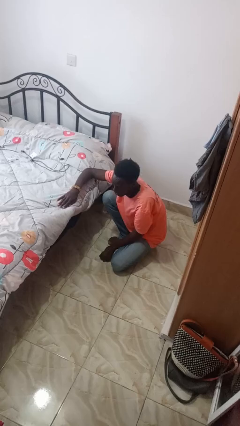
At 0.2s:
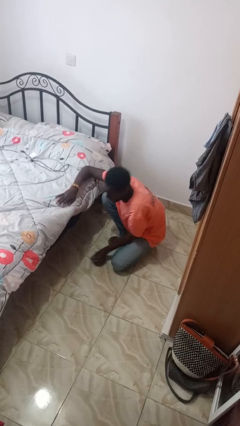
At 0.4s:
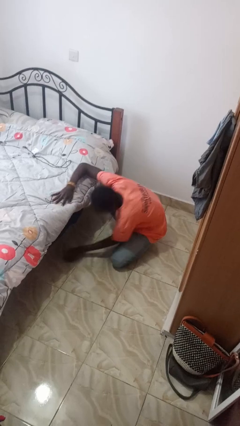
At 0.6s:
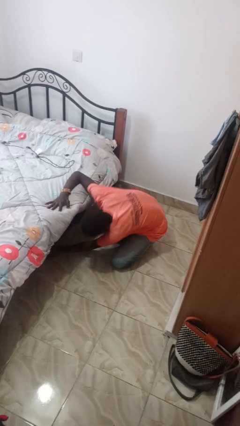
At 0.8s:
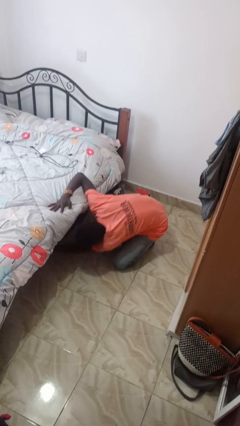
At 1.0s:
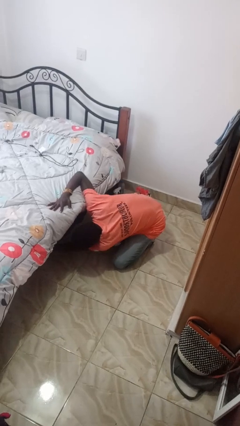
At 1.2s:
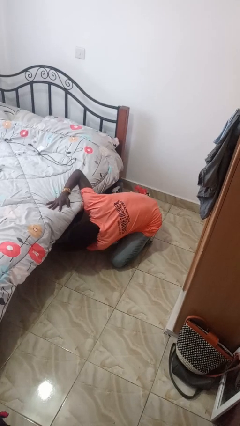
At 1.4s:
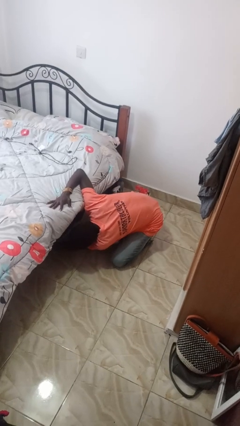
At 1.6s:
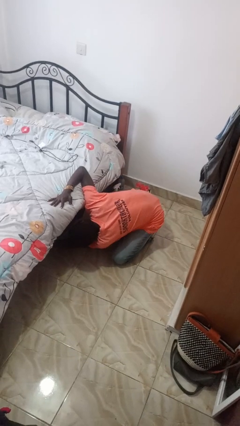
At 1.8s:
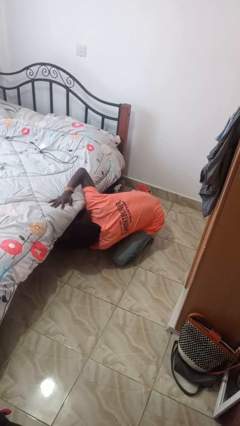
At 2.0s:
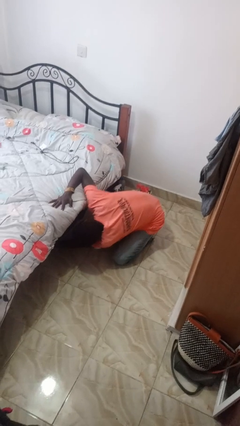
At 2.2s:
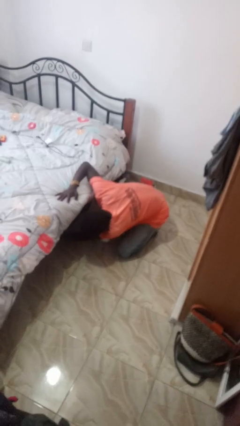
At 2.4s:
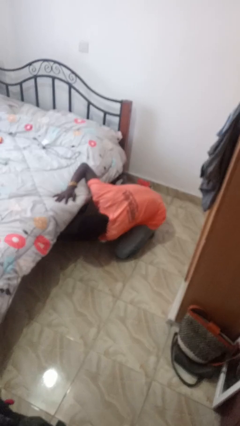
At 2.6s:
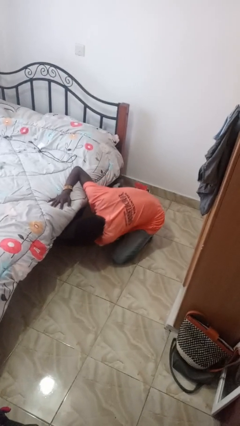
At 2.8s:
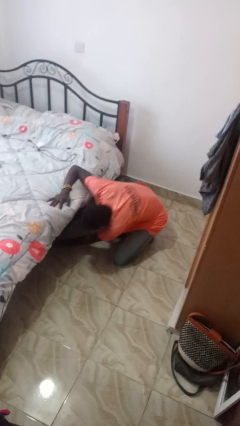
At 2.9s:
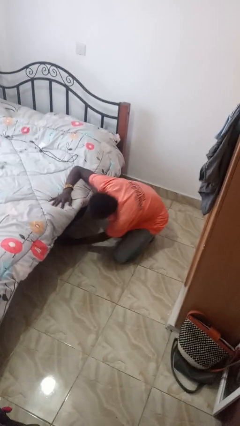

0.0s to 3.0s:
person searches under bed

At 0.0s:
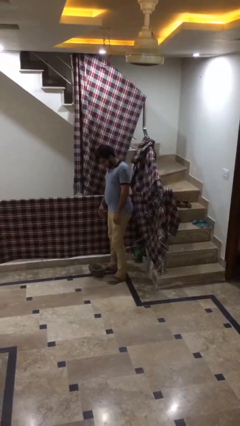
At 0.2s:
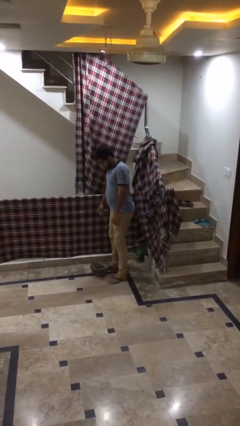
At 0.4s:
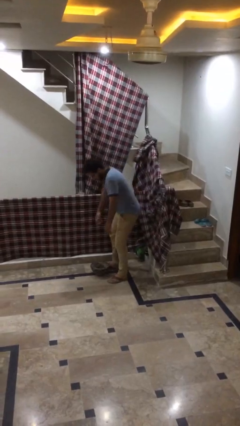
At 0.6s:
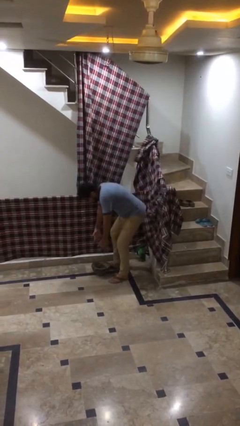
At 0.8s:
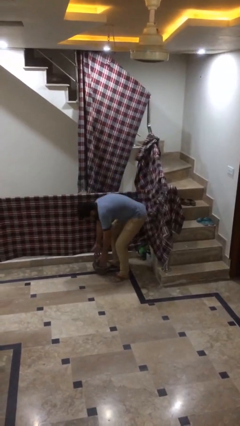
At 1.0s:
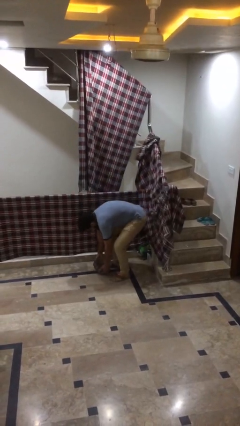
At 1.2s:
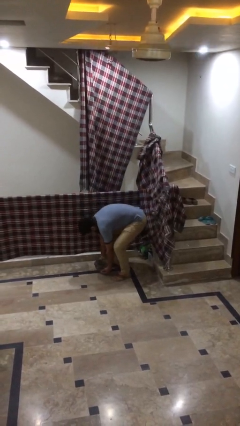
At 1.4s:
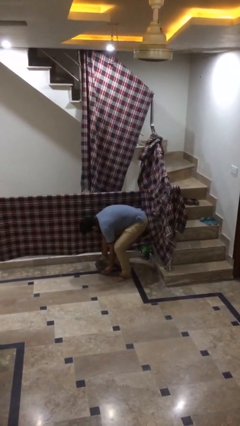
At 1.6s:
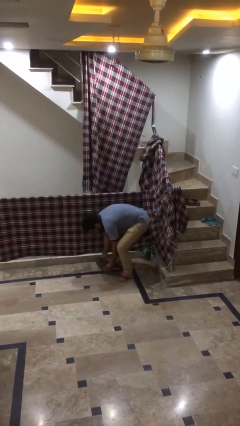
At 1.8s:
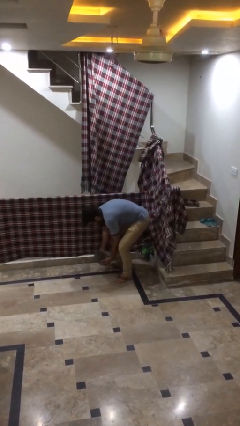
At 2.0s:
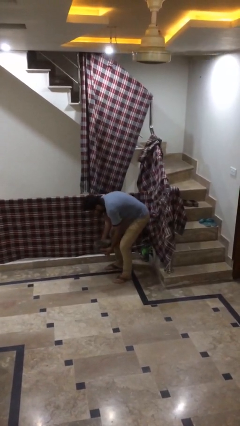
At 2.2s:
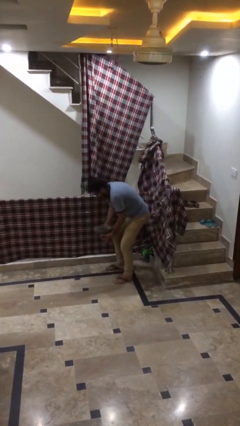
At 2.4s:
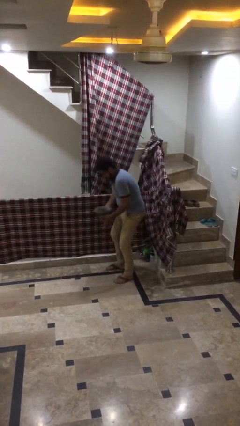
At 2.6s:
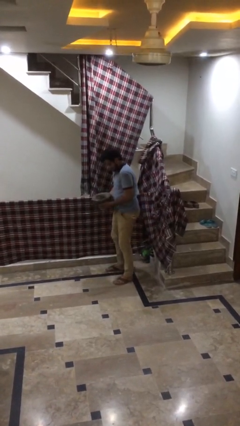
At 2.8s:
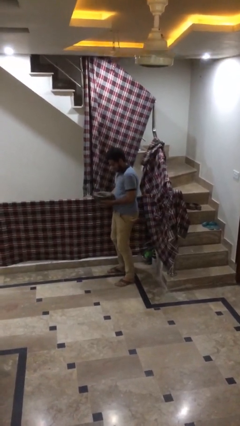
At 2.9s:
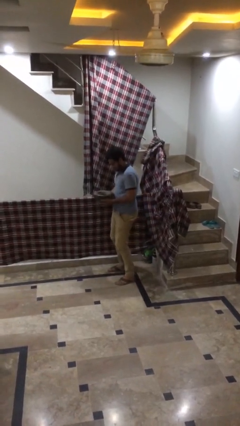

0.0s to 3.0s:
person picks up object from floor

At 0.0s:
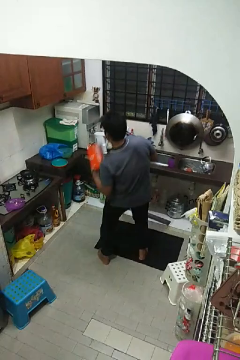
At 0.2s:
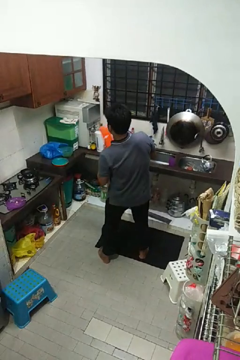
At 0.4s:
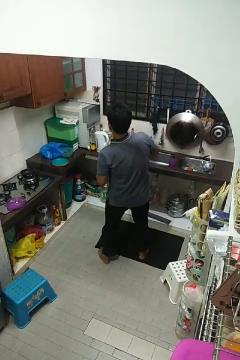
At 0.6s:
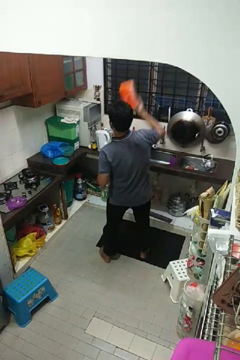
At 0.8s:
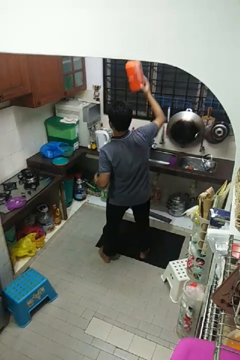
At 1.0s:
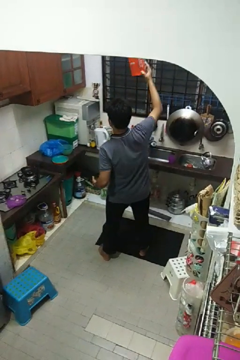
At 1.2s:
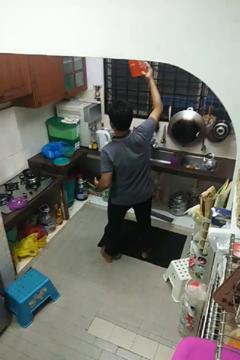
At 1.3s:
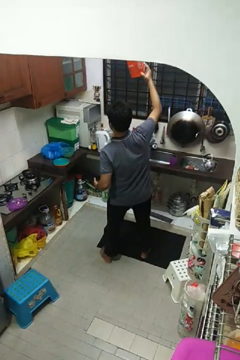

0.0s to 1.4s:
person catches dropped object

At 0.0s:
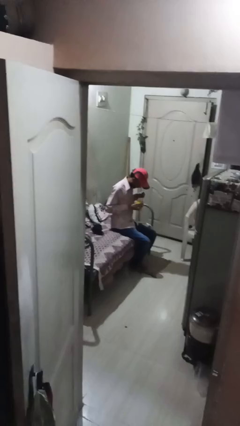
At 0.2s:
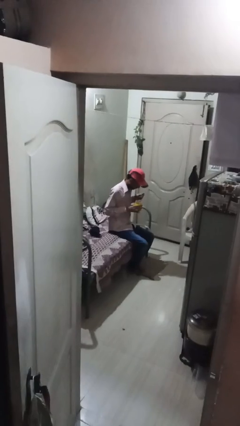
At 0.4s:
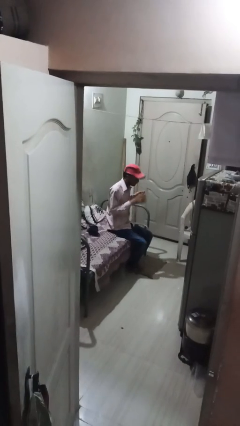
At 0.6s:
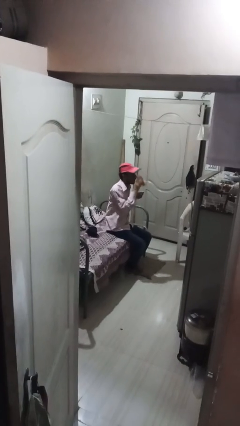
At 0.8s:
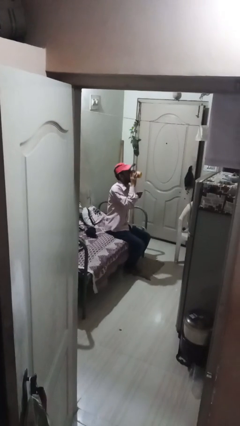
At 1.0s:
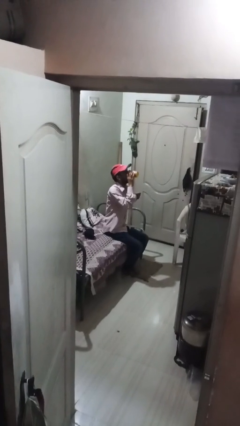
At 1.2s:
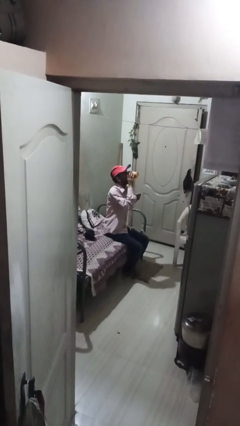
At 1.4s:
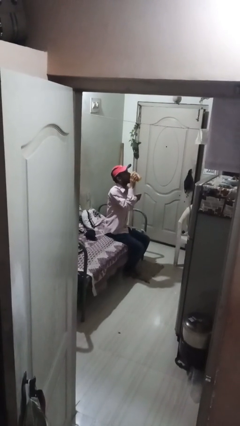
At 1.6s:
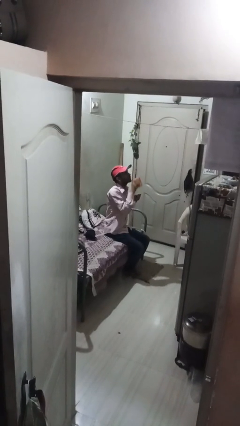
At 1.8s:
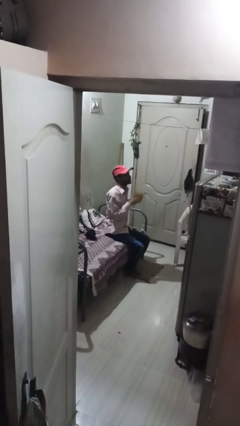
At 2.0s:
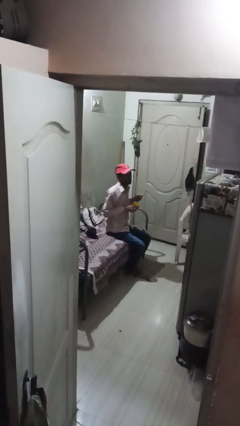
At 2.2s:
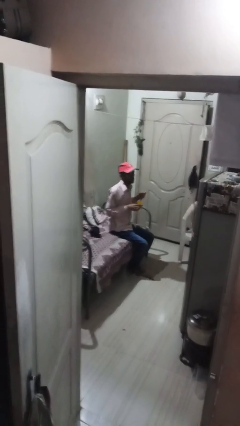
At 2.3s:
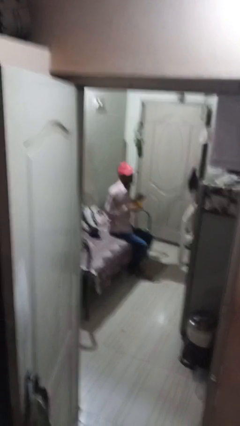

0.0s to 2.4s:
person drinks from mug

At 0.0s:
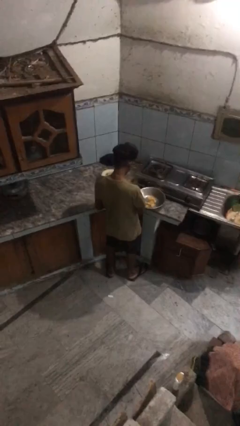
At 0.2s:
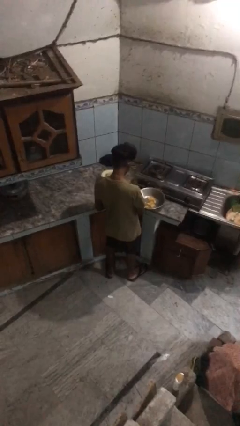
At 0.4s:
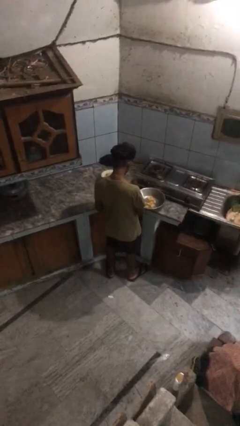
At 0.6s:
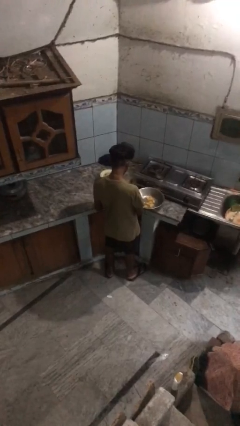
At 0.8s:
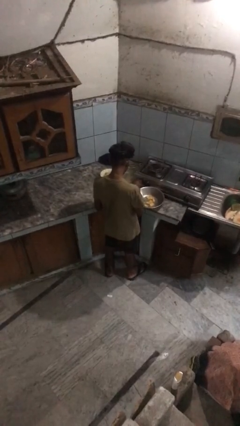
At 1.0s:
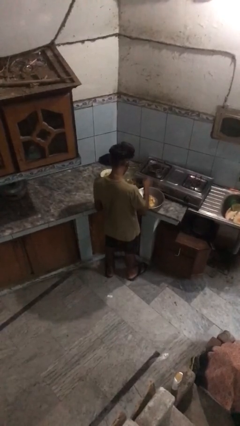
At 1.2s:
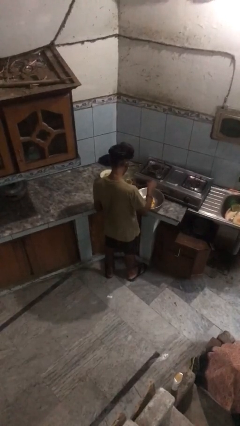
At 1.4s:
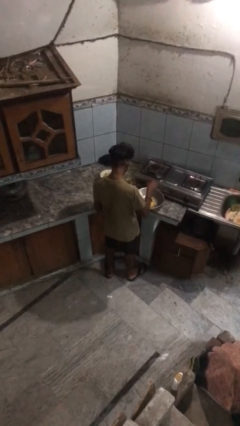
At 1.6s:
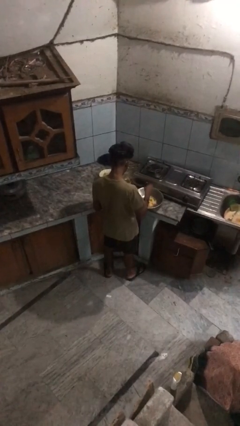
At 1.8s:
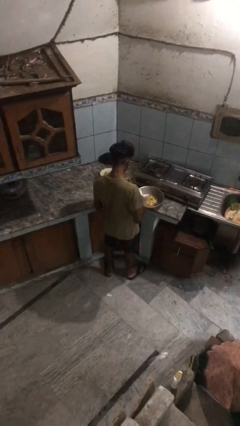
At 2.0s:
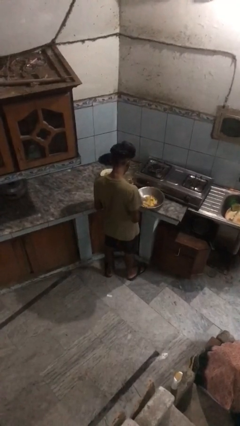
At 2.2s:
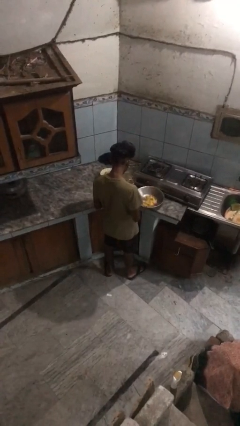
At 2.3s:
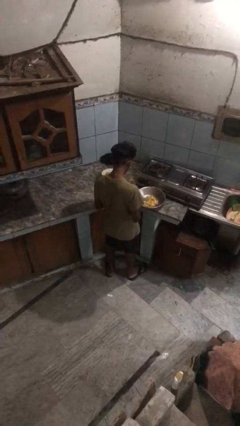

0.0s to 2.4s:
person pours into bowl

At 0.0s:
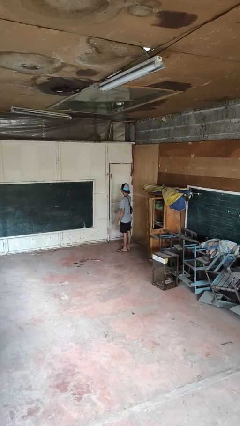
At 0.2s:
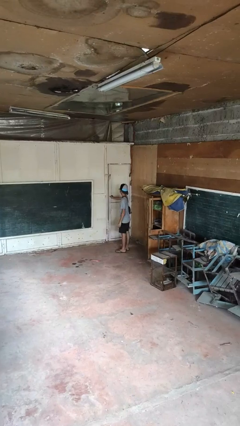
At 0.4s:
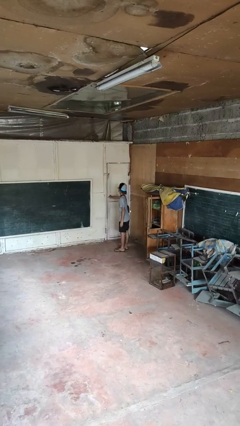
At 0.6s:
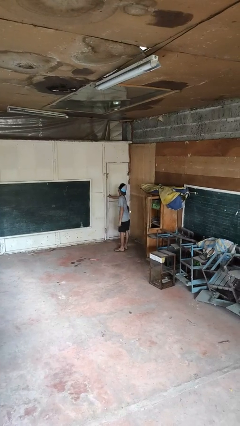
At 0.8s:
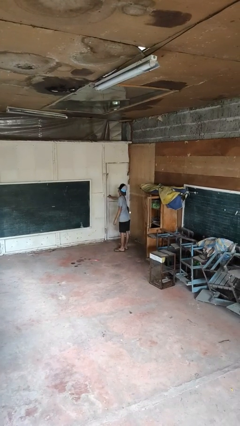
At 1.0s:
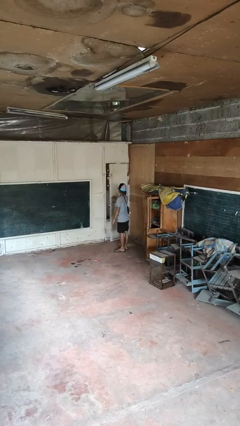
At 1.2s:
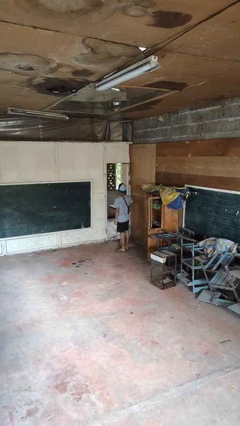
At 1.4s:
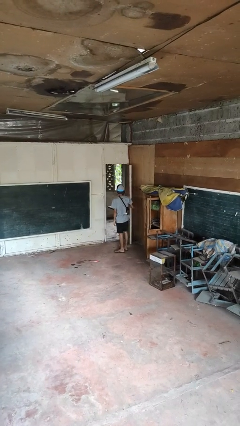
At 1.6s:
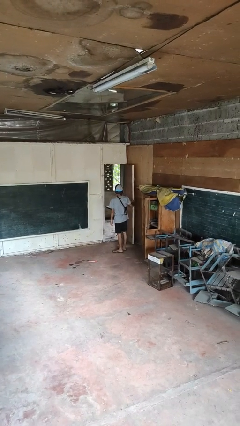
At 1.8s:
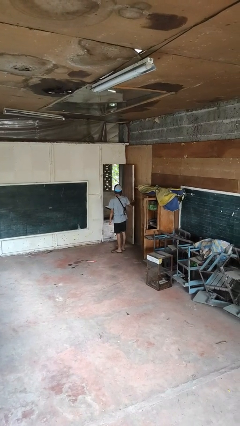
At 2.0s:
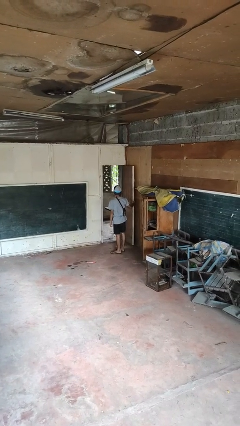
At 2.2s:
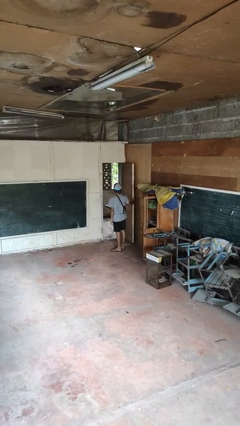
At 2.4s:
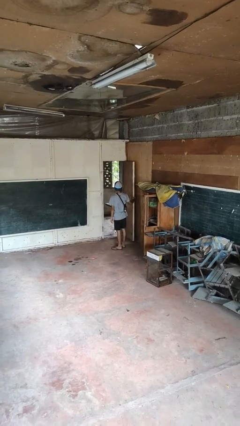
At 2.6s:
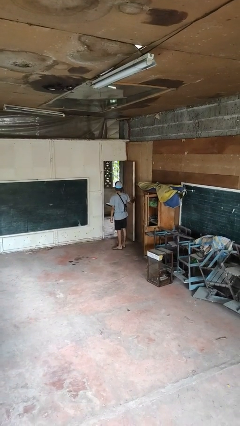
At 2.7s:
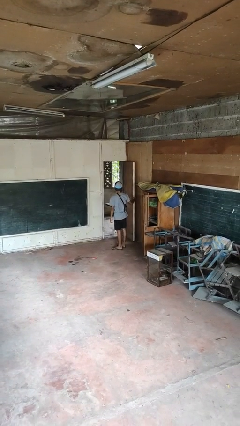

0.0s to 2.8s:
person opens facility door

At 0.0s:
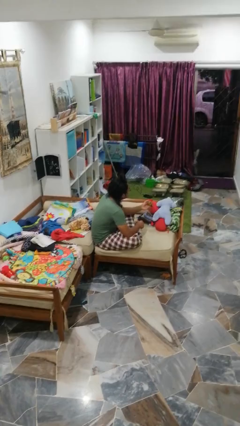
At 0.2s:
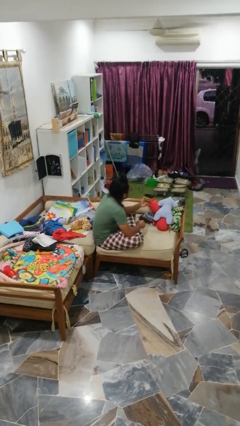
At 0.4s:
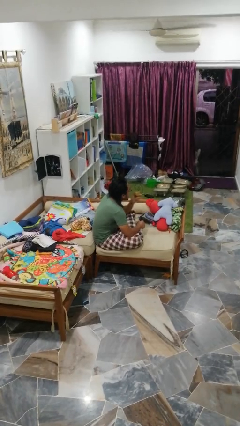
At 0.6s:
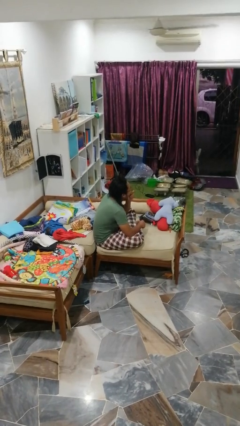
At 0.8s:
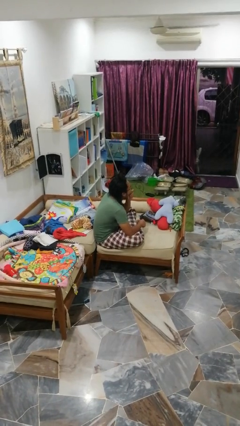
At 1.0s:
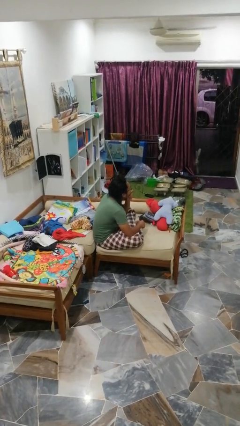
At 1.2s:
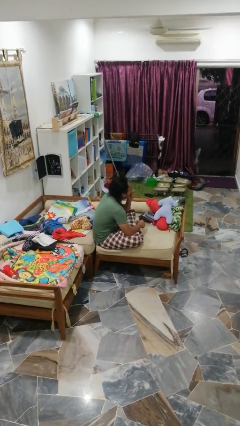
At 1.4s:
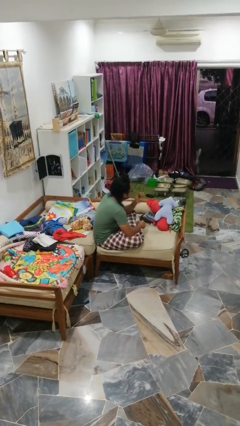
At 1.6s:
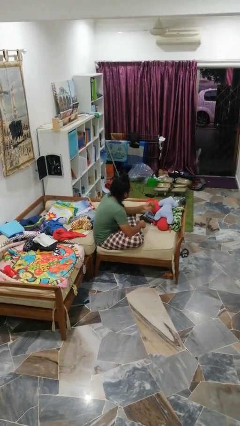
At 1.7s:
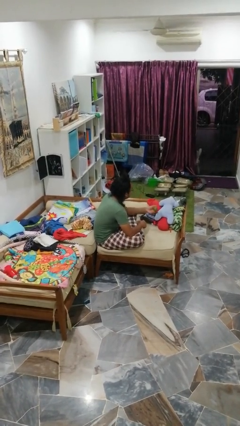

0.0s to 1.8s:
person eats apple

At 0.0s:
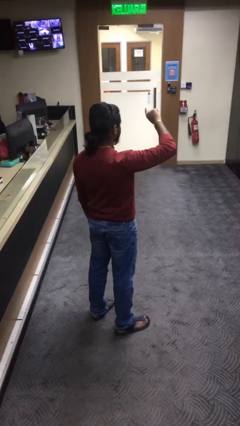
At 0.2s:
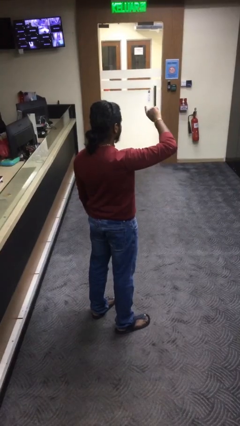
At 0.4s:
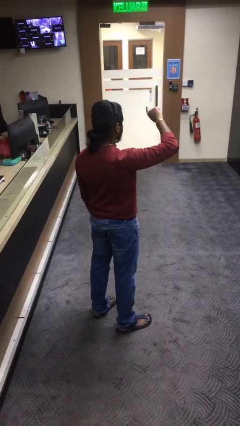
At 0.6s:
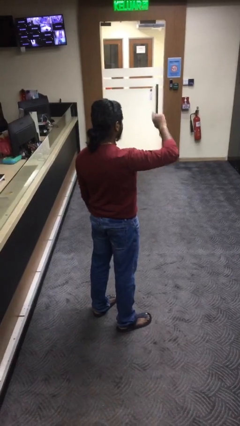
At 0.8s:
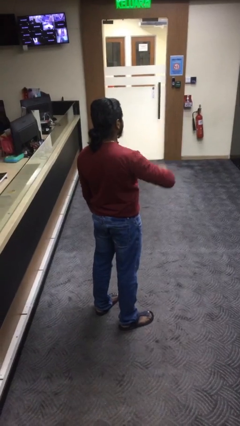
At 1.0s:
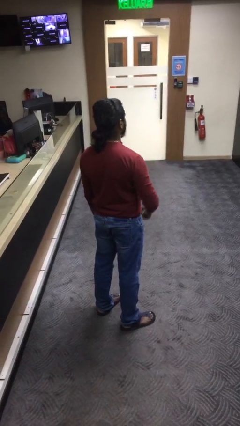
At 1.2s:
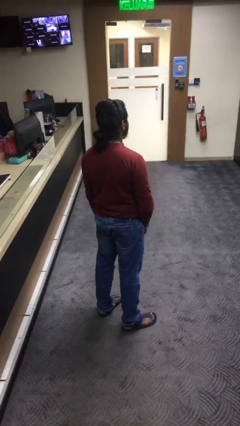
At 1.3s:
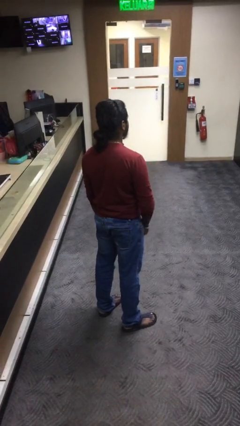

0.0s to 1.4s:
person gestures swipe down
